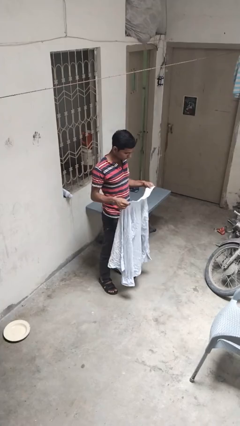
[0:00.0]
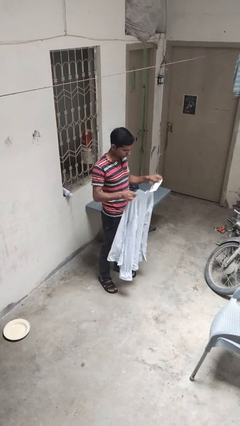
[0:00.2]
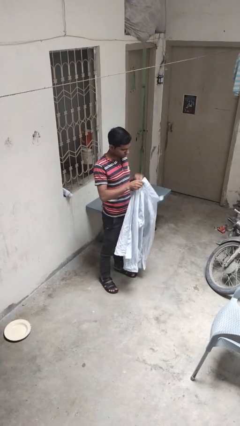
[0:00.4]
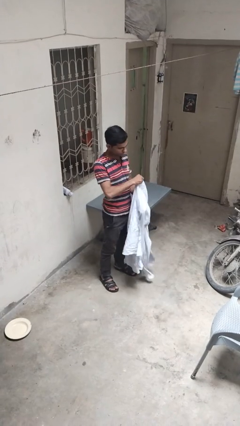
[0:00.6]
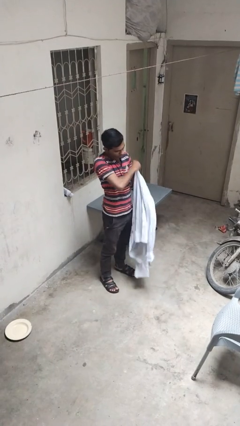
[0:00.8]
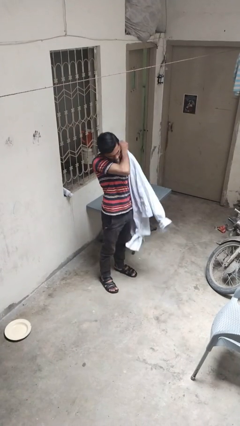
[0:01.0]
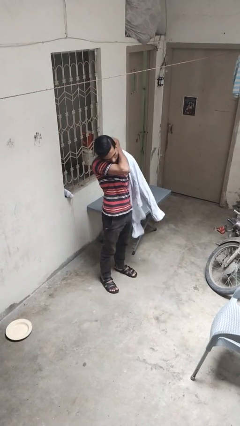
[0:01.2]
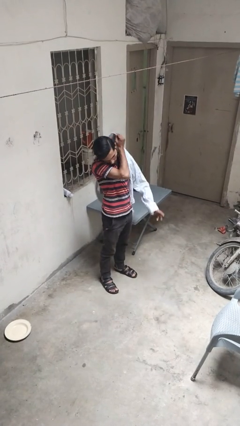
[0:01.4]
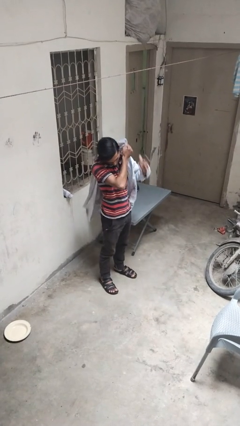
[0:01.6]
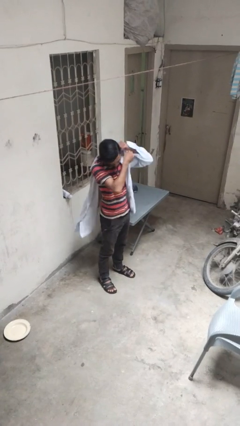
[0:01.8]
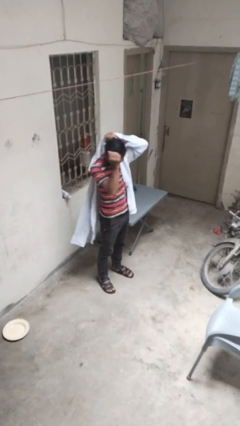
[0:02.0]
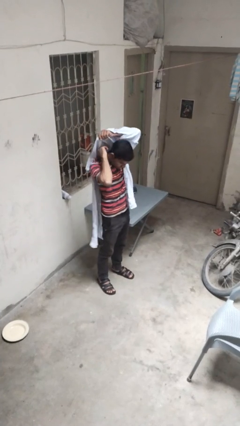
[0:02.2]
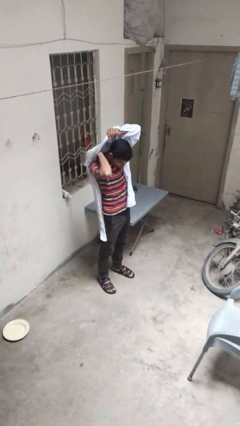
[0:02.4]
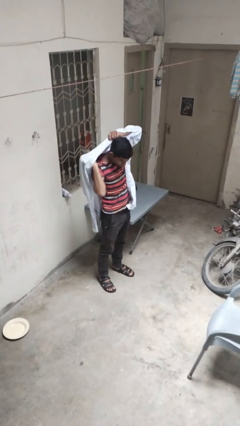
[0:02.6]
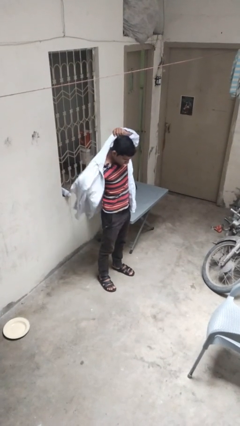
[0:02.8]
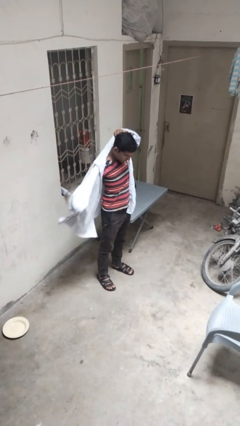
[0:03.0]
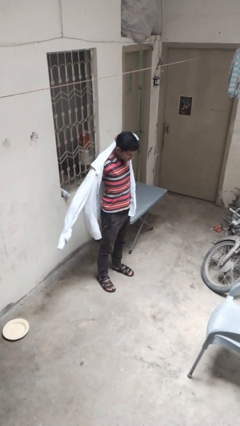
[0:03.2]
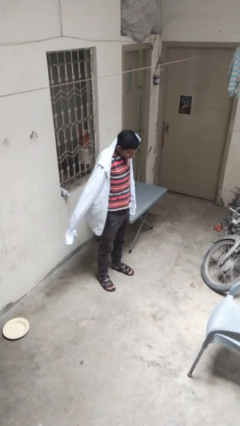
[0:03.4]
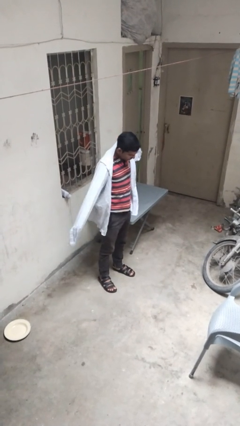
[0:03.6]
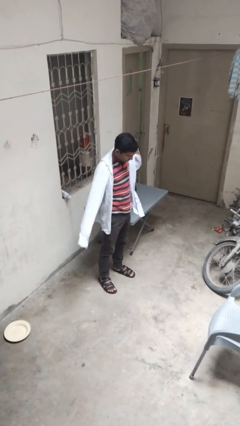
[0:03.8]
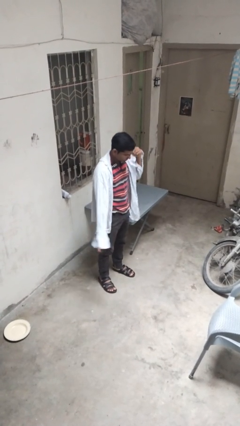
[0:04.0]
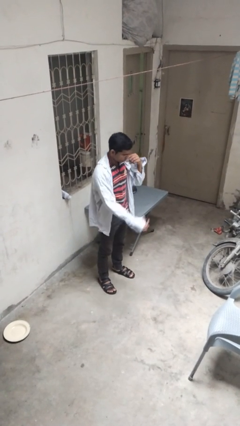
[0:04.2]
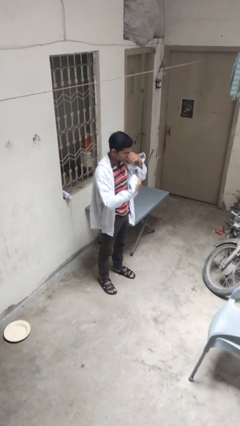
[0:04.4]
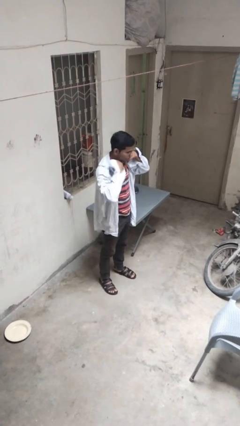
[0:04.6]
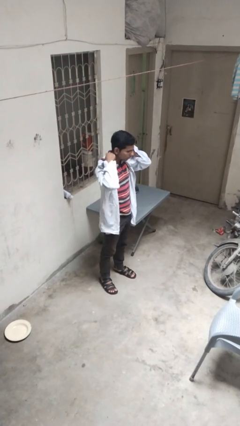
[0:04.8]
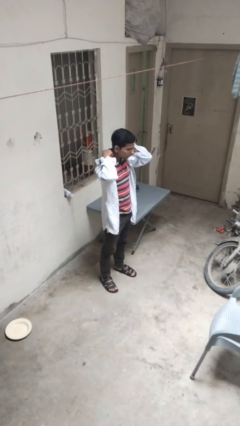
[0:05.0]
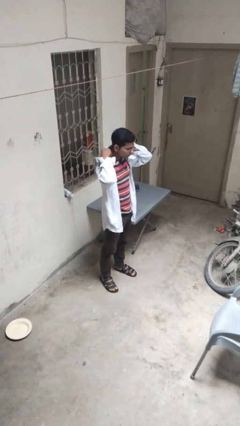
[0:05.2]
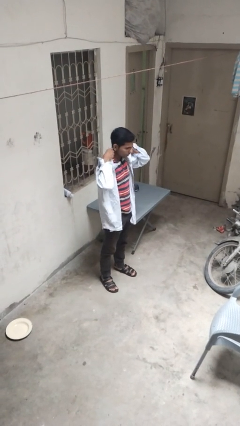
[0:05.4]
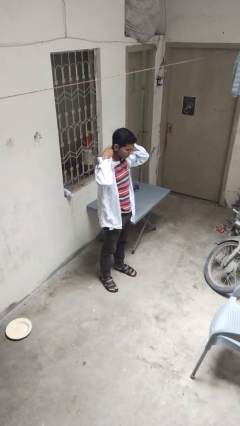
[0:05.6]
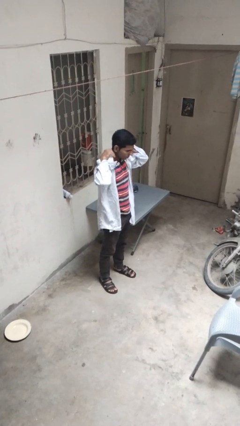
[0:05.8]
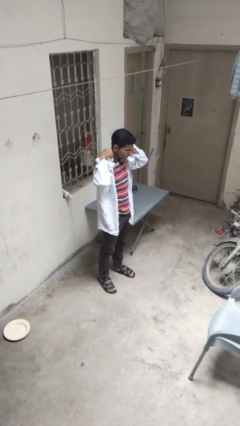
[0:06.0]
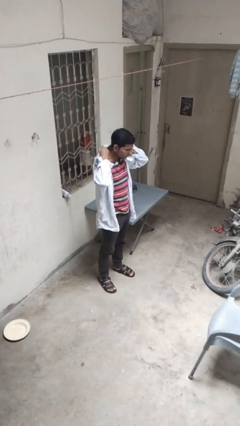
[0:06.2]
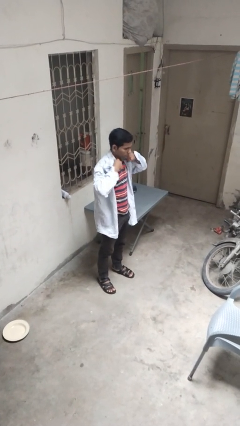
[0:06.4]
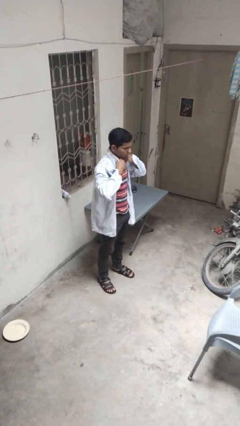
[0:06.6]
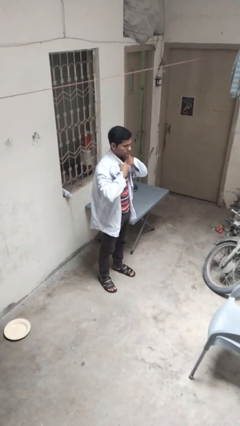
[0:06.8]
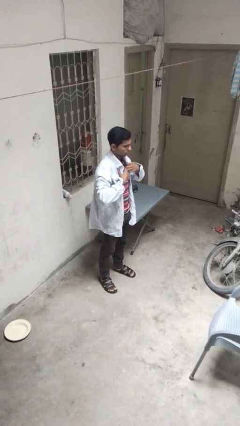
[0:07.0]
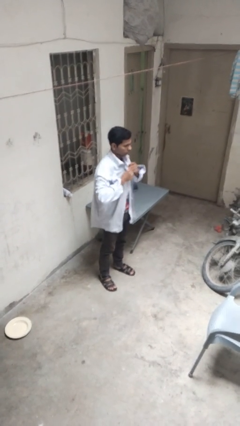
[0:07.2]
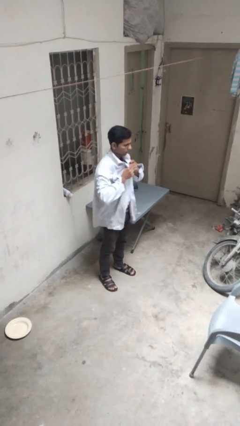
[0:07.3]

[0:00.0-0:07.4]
person puts on shirt

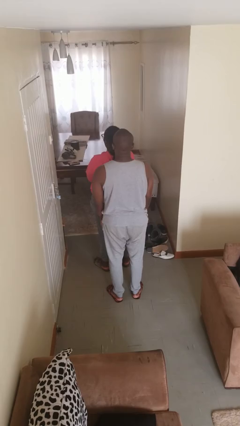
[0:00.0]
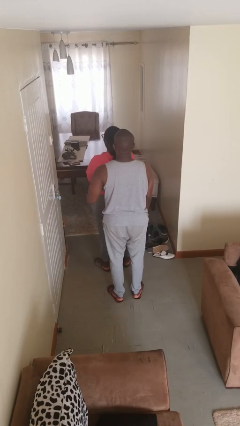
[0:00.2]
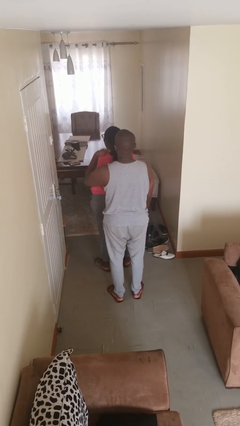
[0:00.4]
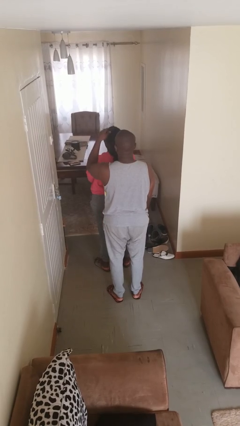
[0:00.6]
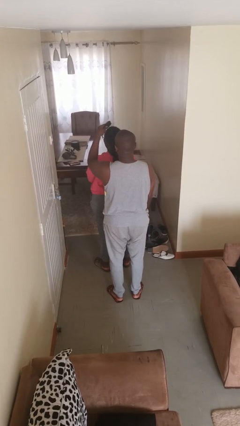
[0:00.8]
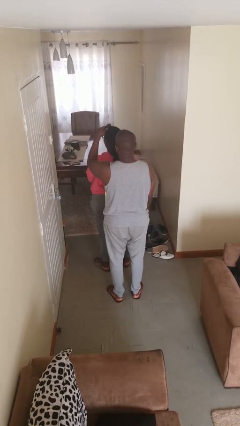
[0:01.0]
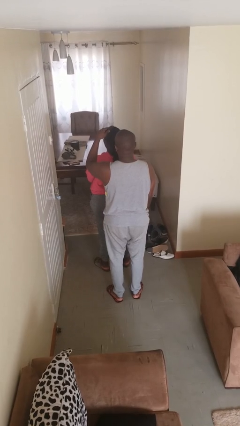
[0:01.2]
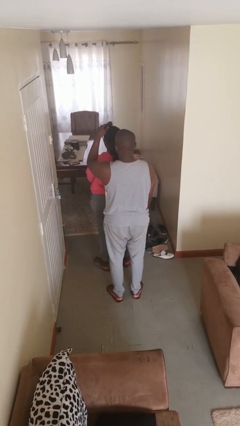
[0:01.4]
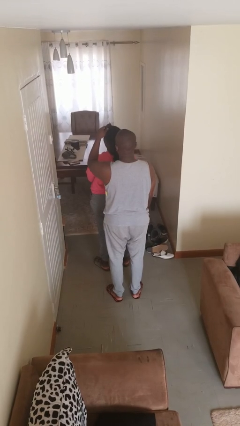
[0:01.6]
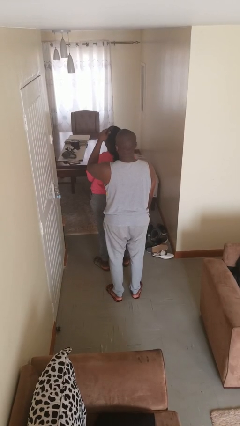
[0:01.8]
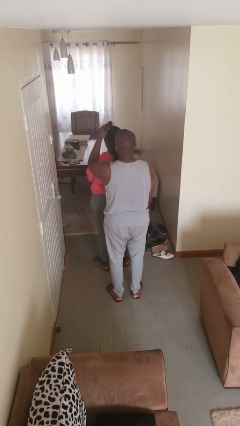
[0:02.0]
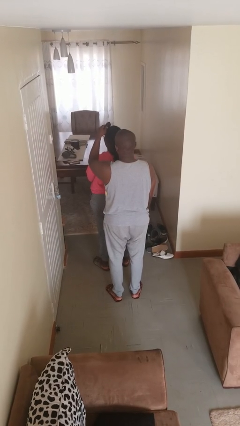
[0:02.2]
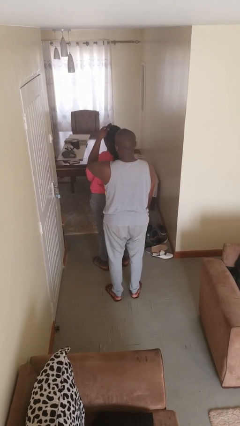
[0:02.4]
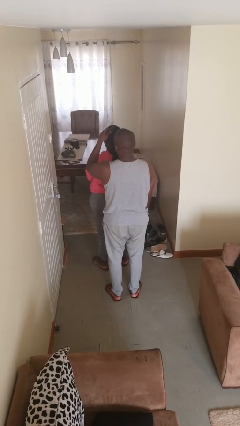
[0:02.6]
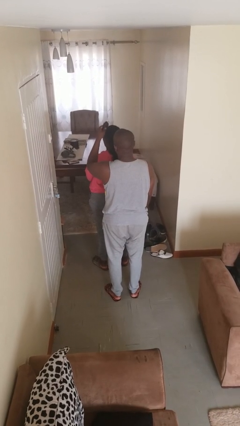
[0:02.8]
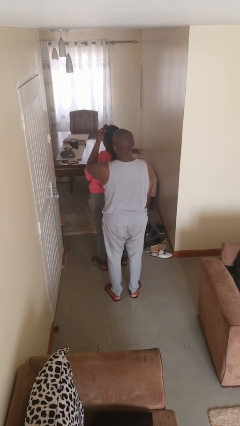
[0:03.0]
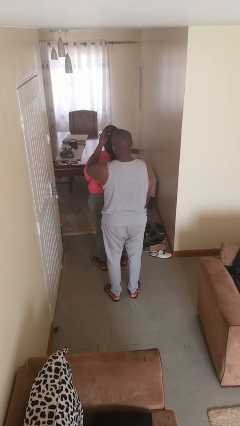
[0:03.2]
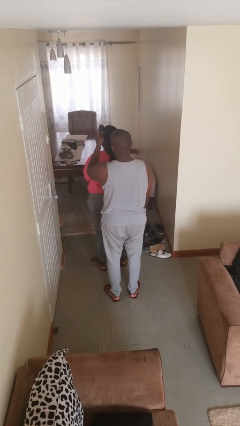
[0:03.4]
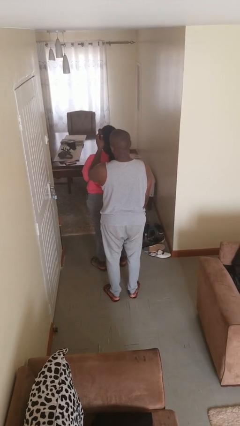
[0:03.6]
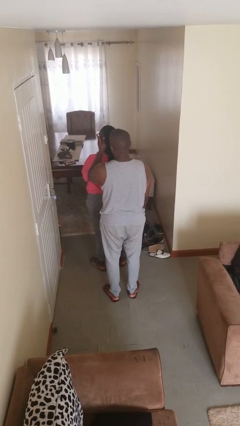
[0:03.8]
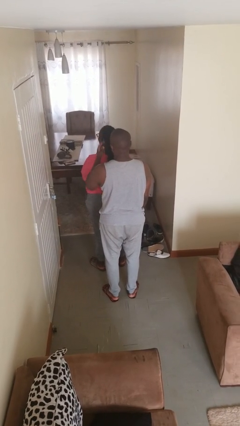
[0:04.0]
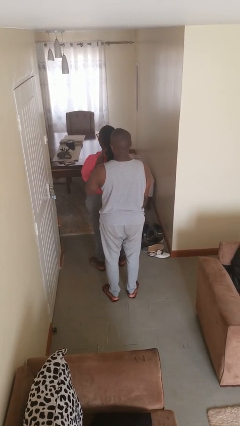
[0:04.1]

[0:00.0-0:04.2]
person brushes hair of person

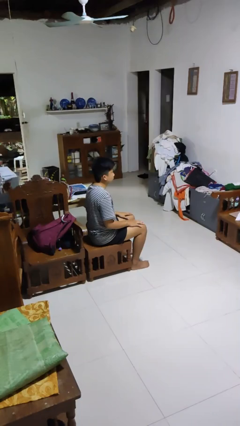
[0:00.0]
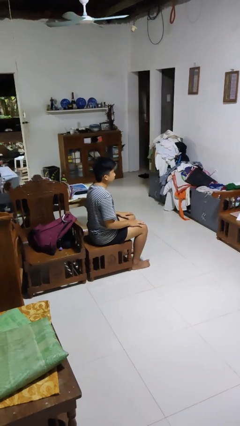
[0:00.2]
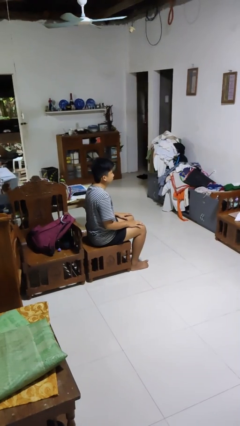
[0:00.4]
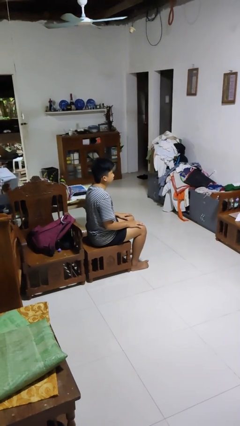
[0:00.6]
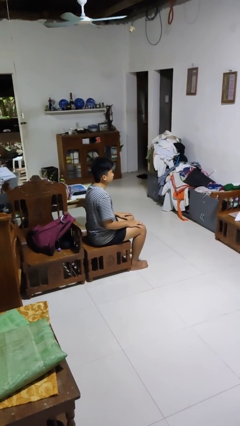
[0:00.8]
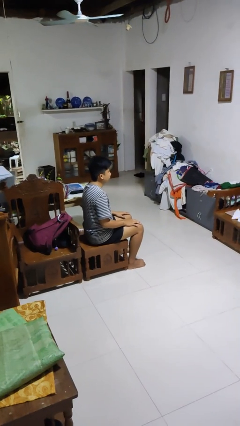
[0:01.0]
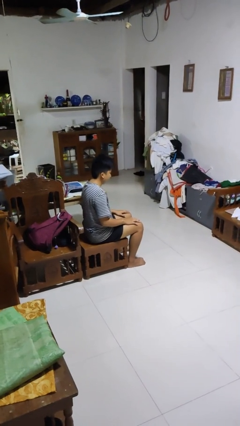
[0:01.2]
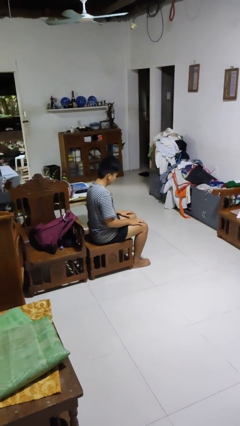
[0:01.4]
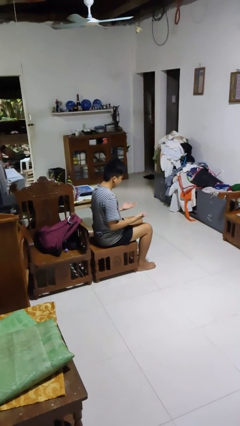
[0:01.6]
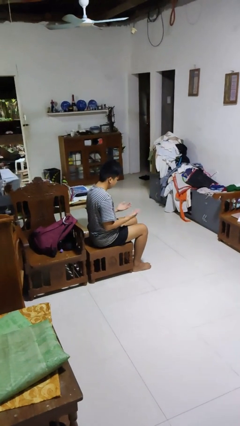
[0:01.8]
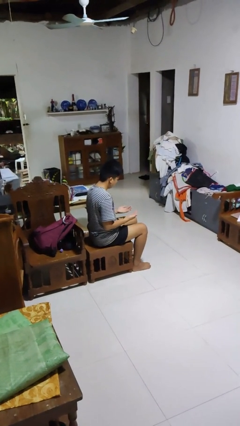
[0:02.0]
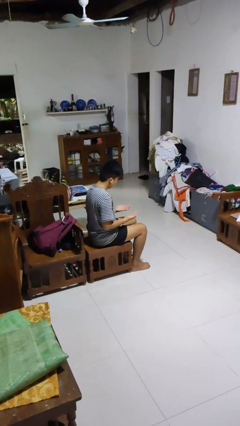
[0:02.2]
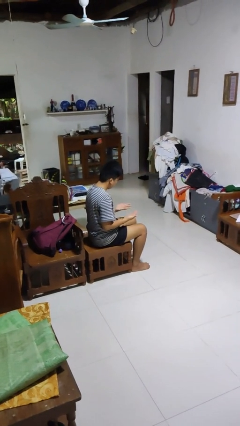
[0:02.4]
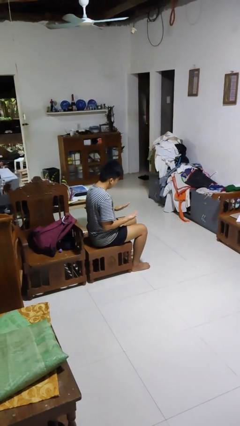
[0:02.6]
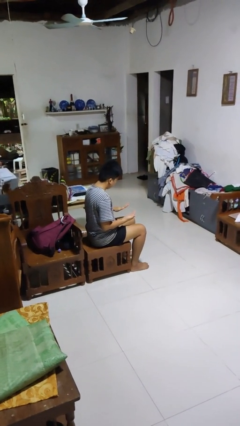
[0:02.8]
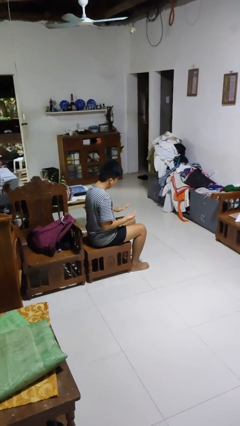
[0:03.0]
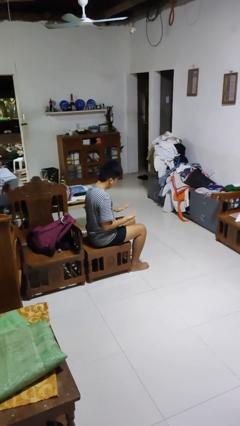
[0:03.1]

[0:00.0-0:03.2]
person looks at hands in lap

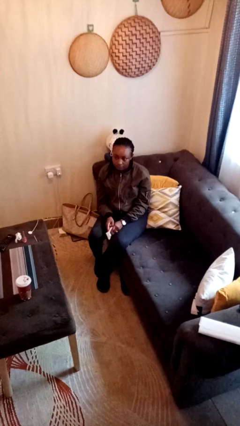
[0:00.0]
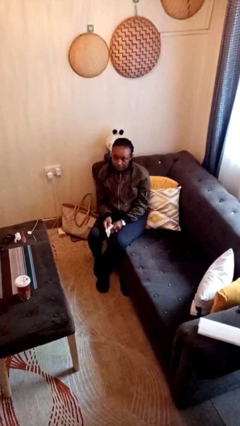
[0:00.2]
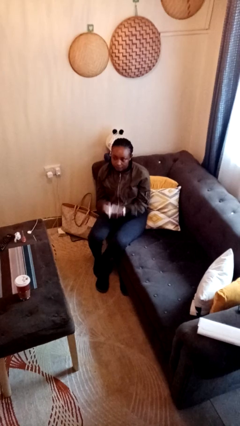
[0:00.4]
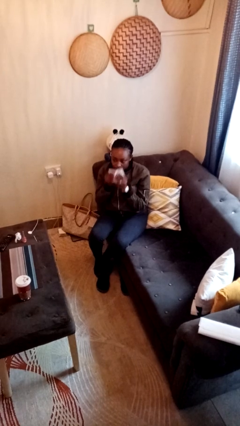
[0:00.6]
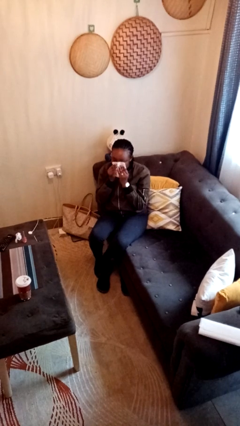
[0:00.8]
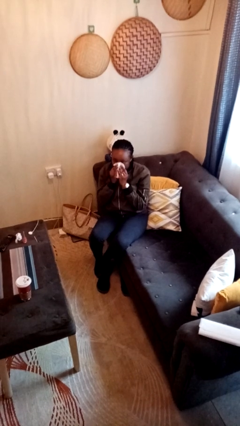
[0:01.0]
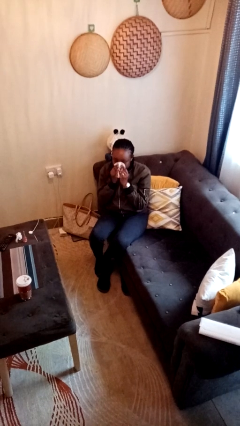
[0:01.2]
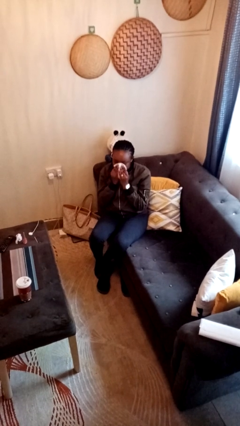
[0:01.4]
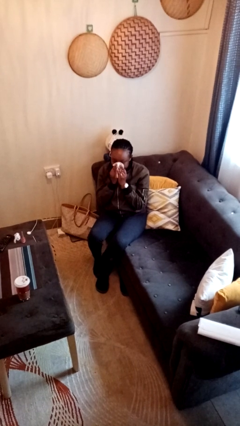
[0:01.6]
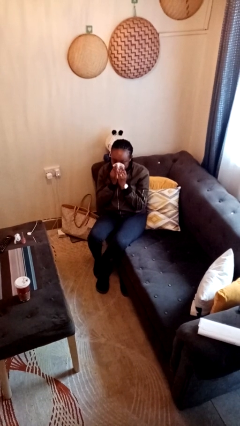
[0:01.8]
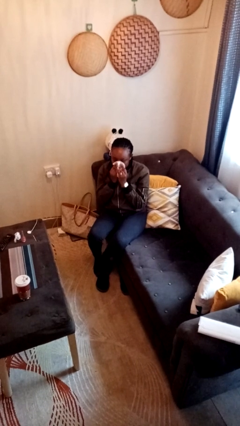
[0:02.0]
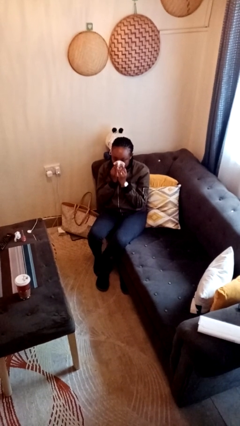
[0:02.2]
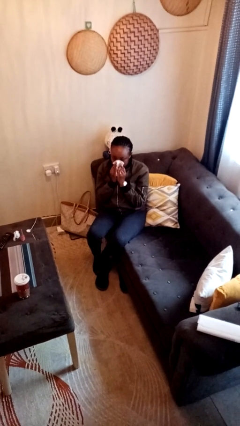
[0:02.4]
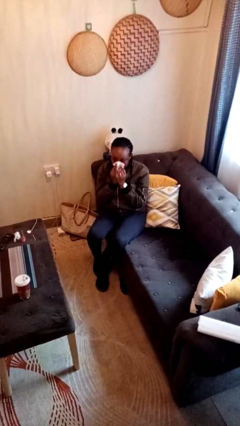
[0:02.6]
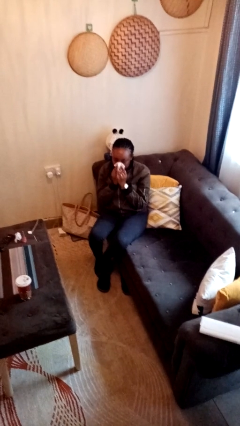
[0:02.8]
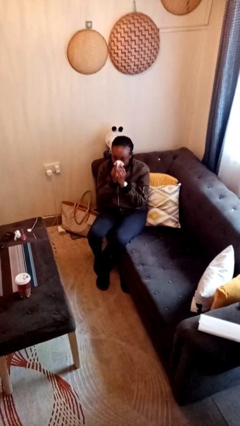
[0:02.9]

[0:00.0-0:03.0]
person blows nose

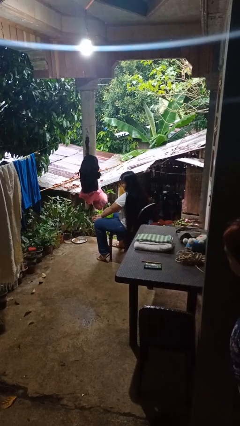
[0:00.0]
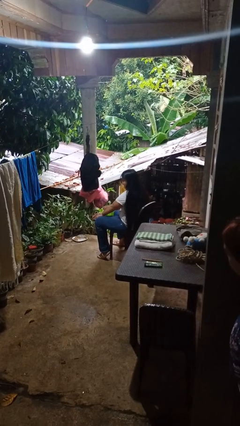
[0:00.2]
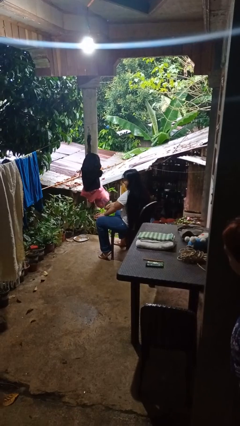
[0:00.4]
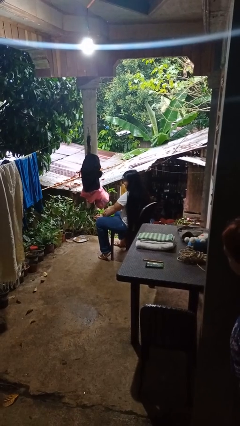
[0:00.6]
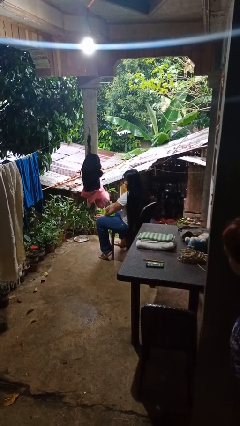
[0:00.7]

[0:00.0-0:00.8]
person swats bug
